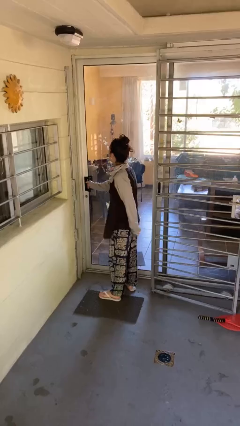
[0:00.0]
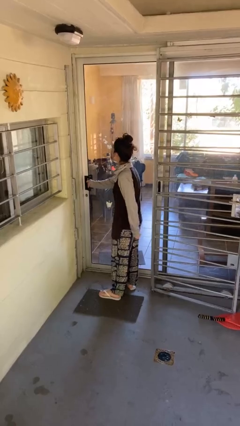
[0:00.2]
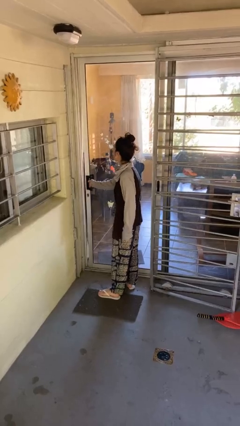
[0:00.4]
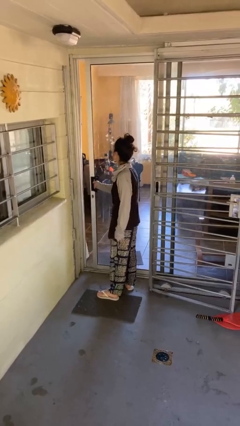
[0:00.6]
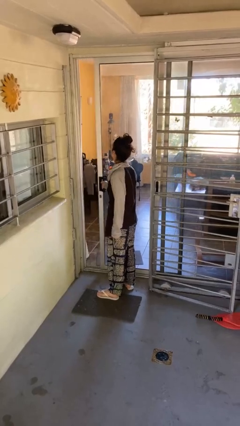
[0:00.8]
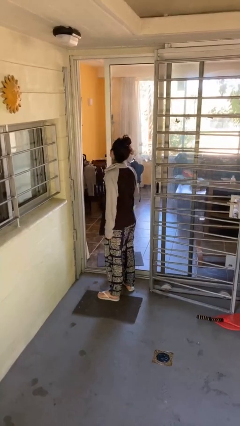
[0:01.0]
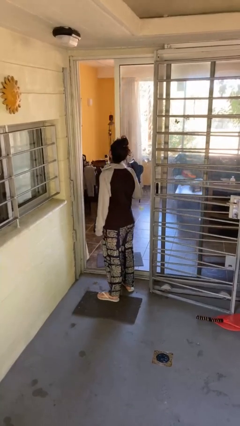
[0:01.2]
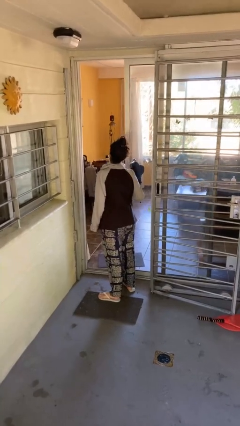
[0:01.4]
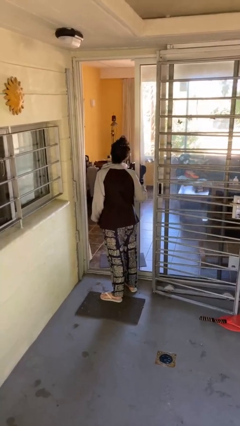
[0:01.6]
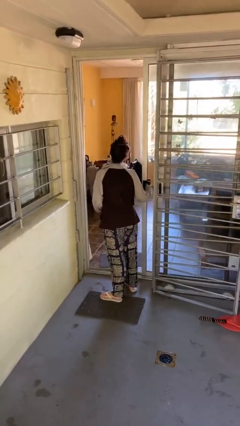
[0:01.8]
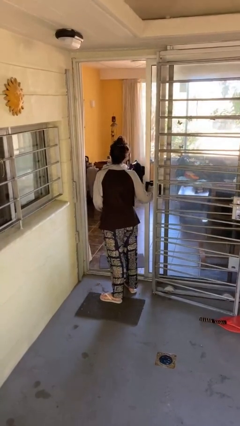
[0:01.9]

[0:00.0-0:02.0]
person opens facility door

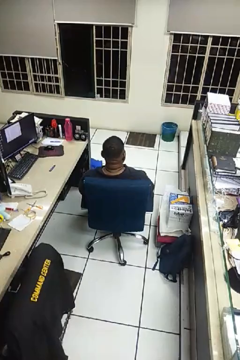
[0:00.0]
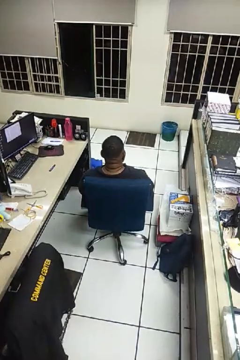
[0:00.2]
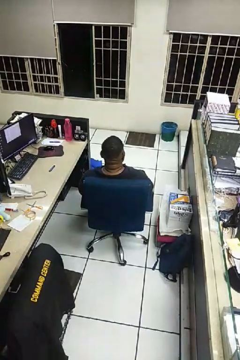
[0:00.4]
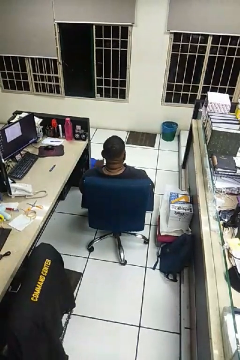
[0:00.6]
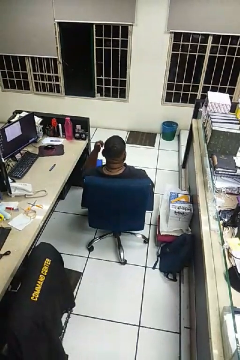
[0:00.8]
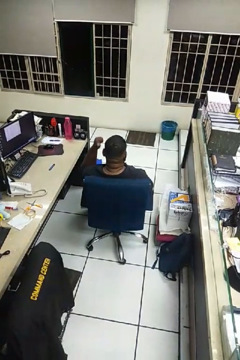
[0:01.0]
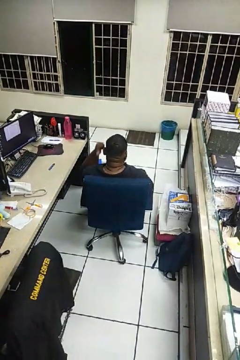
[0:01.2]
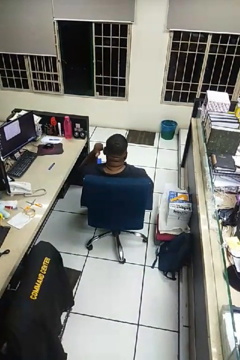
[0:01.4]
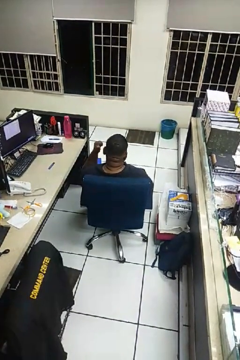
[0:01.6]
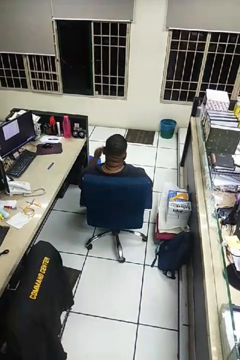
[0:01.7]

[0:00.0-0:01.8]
person gestures behind me

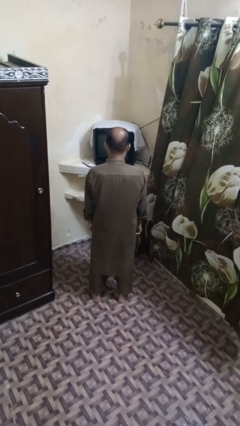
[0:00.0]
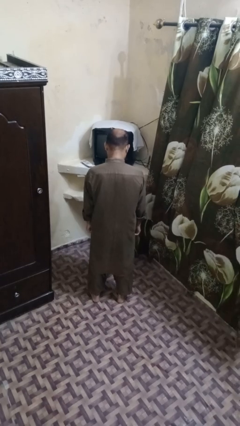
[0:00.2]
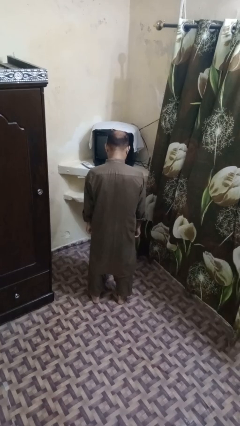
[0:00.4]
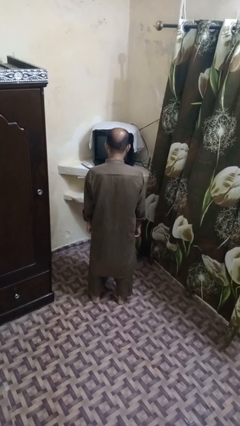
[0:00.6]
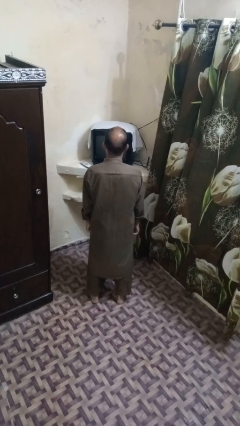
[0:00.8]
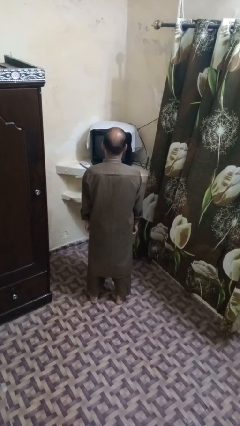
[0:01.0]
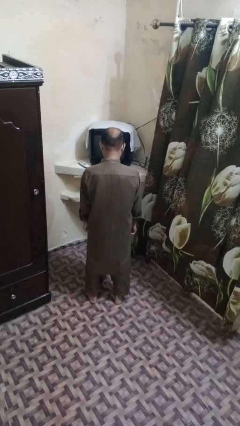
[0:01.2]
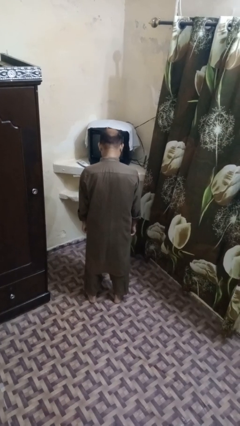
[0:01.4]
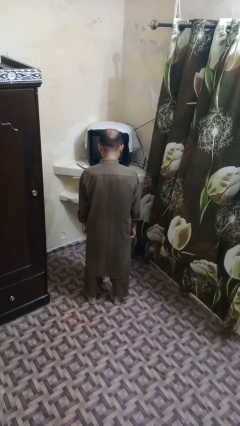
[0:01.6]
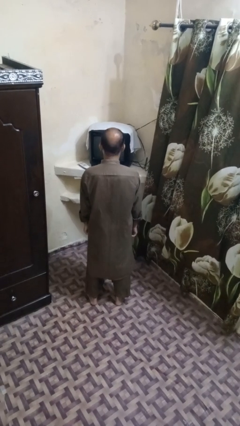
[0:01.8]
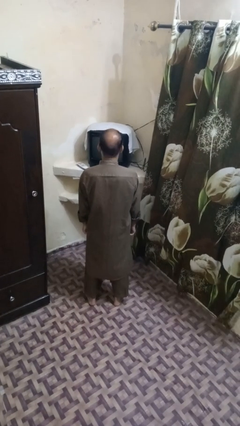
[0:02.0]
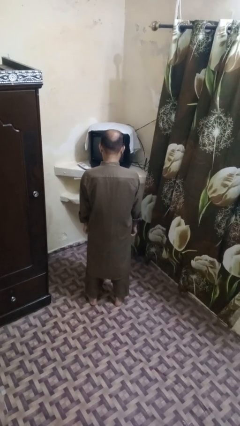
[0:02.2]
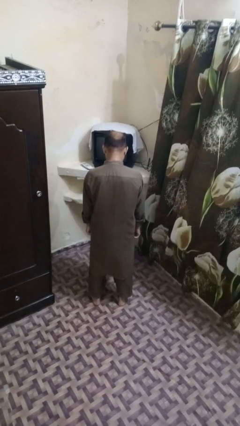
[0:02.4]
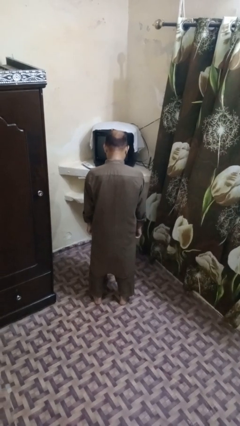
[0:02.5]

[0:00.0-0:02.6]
person nods head

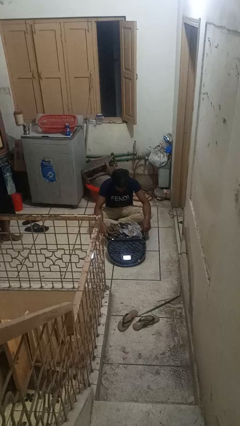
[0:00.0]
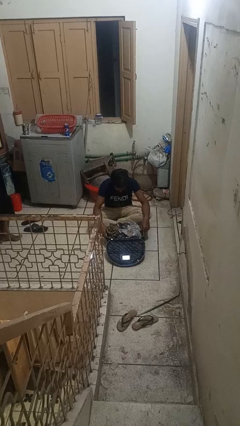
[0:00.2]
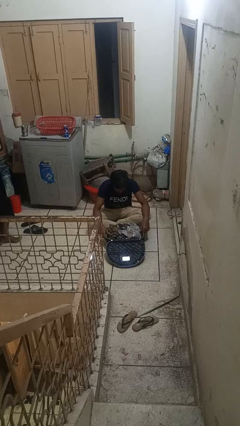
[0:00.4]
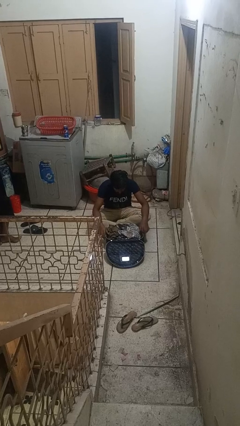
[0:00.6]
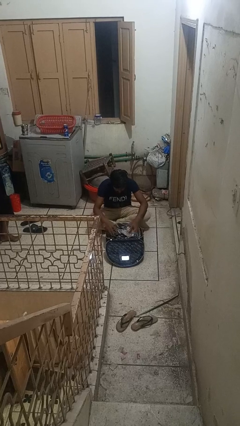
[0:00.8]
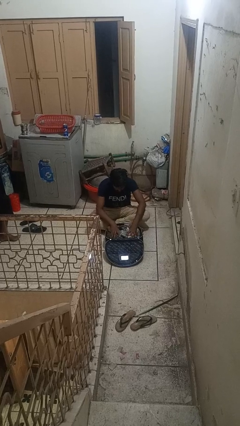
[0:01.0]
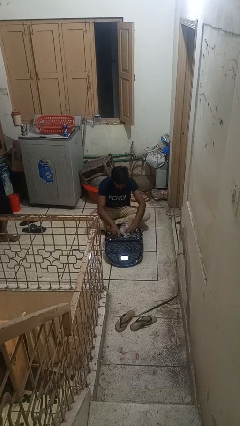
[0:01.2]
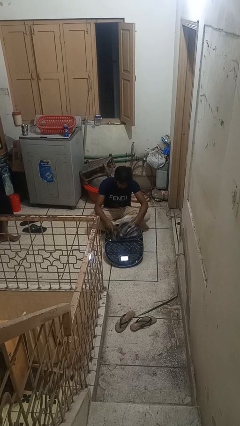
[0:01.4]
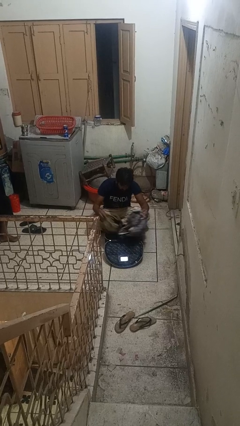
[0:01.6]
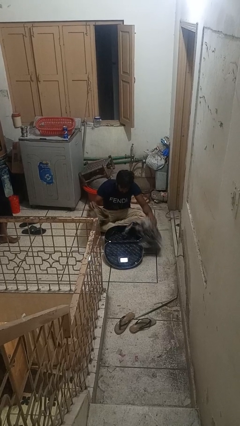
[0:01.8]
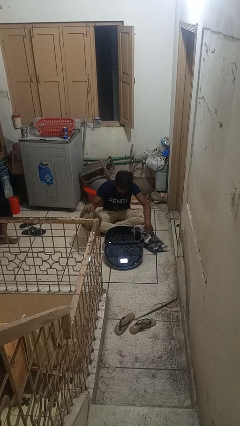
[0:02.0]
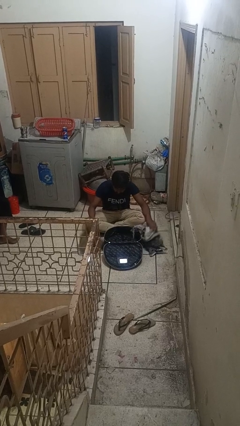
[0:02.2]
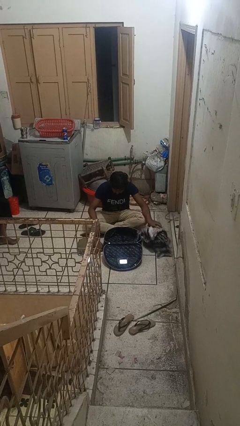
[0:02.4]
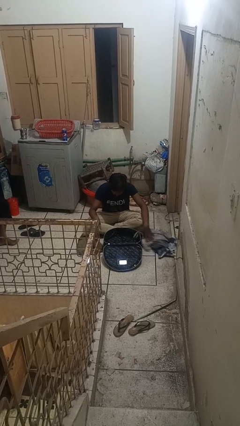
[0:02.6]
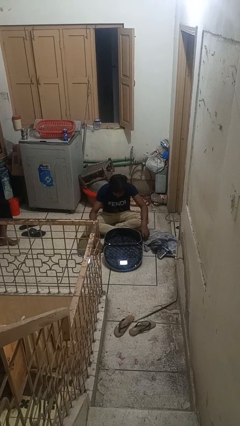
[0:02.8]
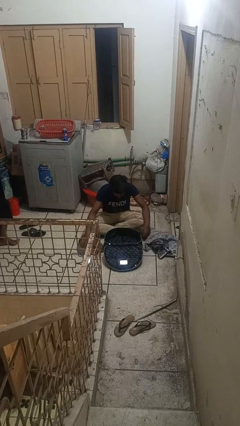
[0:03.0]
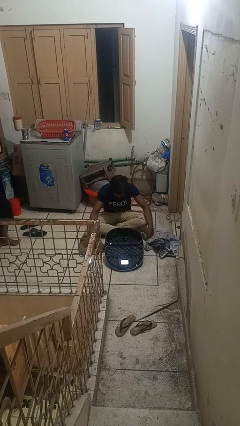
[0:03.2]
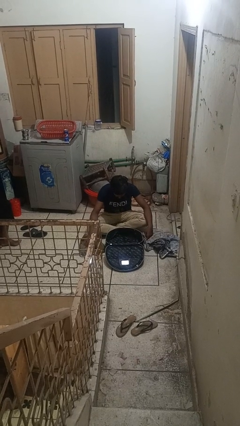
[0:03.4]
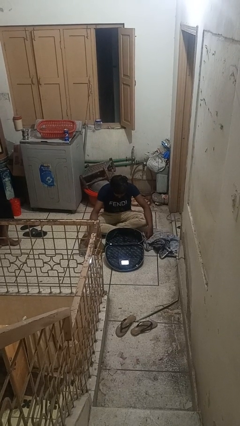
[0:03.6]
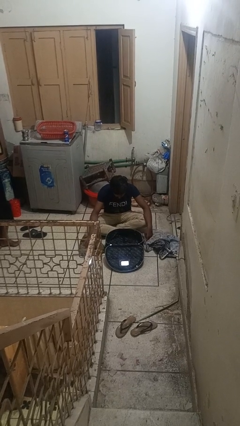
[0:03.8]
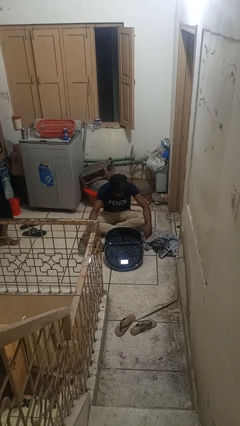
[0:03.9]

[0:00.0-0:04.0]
person unloads clothes from suitcase

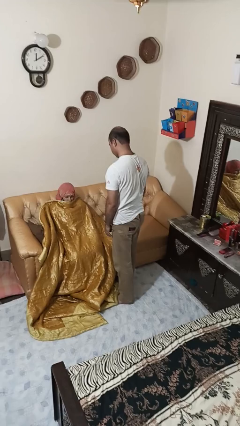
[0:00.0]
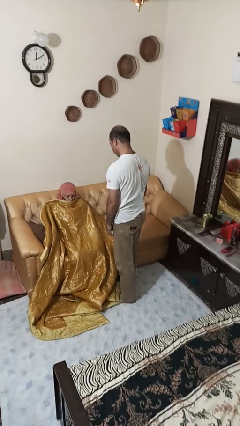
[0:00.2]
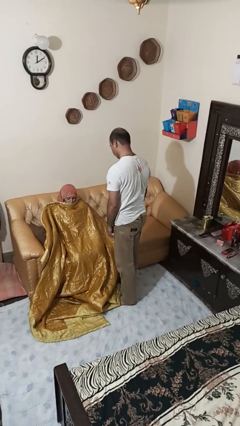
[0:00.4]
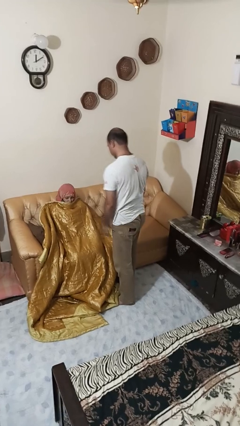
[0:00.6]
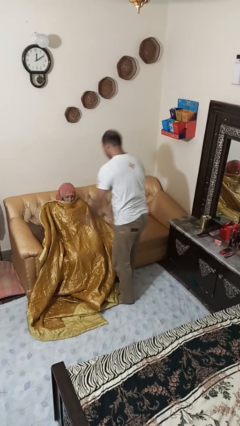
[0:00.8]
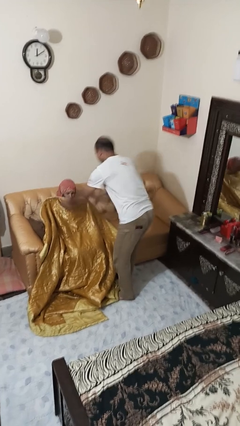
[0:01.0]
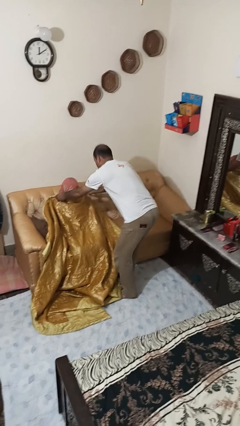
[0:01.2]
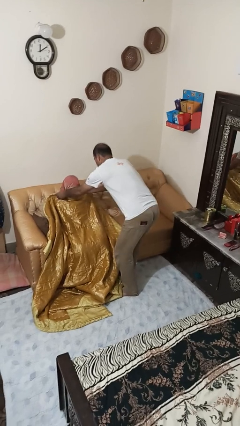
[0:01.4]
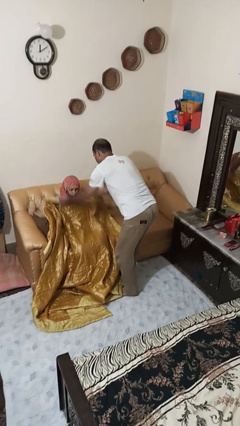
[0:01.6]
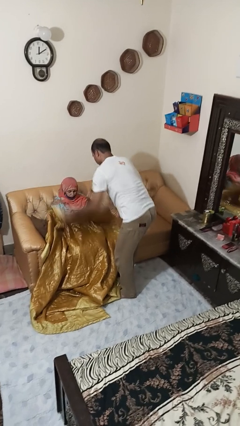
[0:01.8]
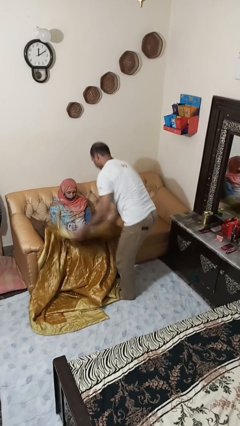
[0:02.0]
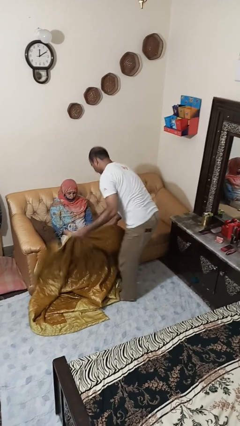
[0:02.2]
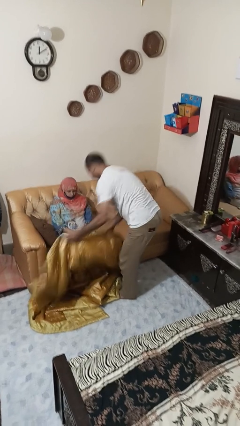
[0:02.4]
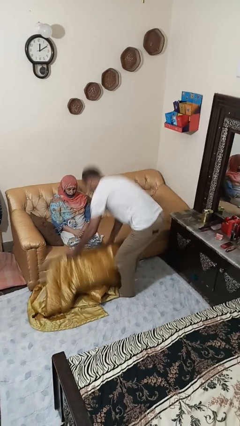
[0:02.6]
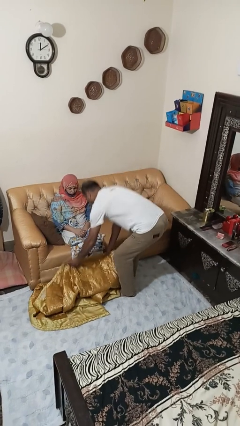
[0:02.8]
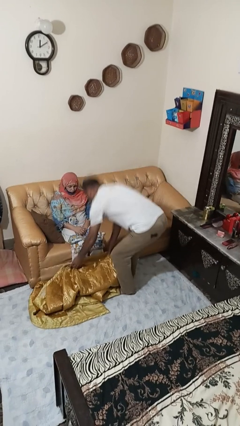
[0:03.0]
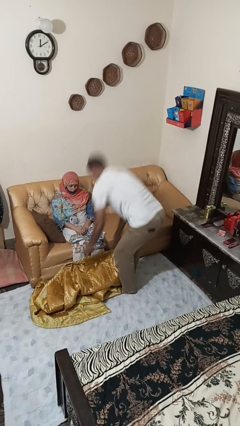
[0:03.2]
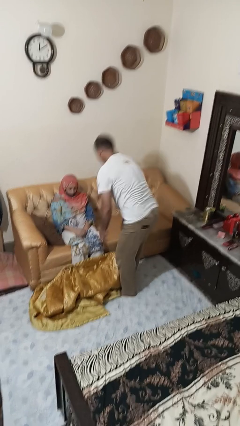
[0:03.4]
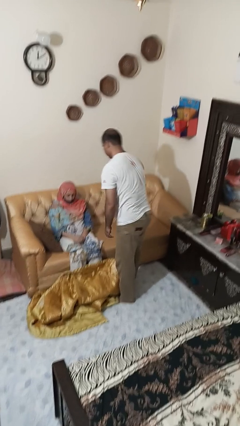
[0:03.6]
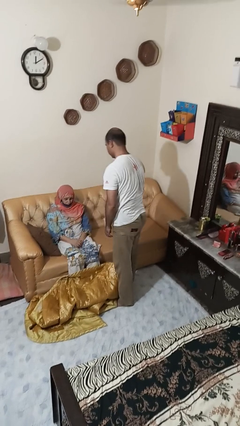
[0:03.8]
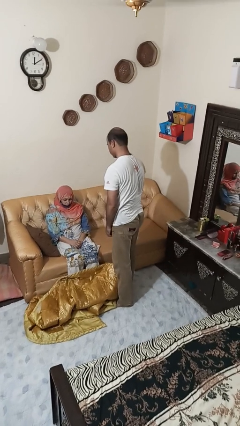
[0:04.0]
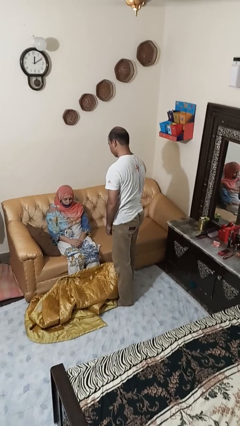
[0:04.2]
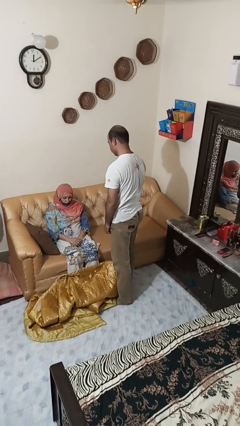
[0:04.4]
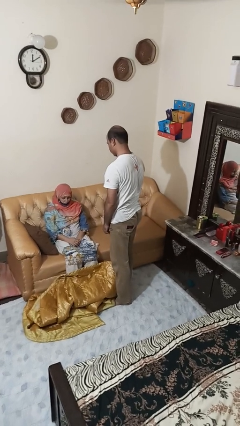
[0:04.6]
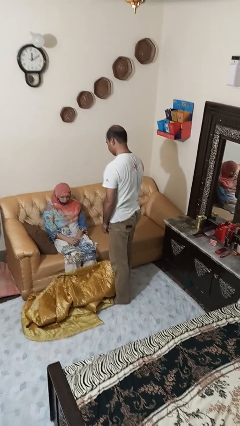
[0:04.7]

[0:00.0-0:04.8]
person uncovers friend with blanket

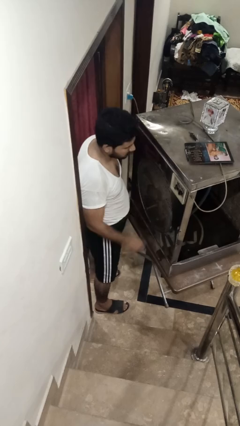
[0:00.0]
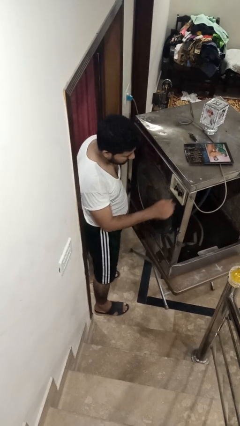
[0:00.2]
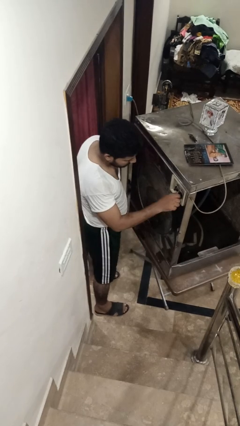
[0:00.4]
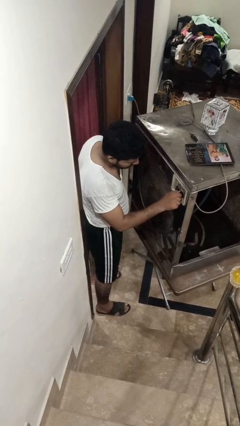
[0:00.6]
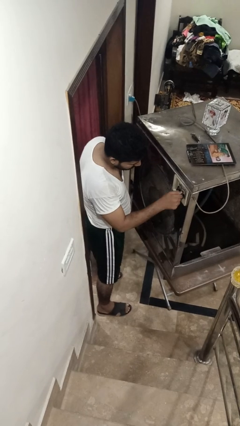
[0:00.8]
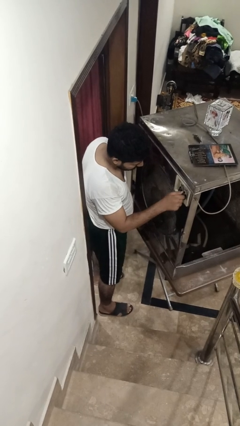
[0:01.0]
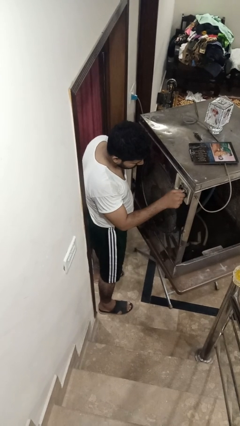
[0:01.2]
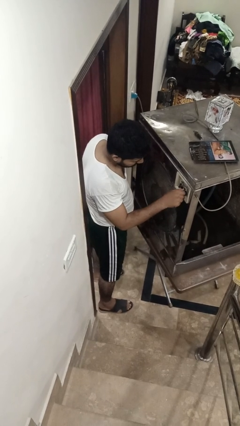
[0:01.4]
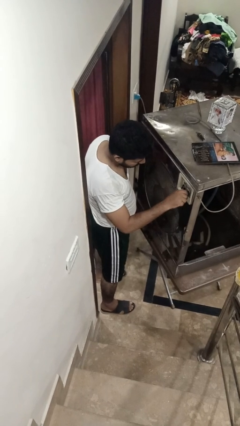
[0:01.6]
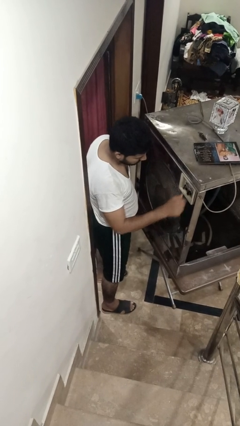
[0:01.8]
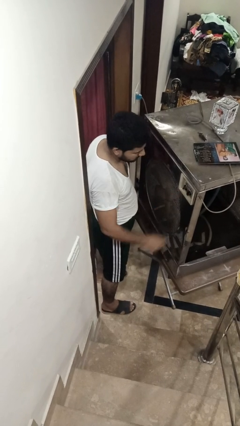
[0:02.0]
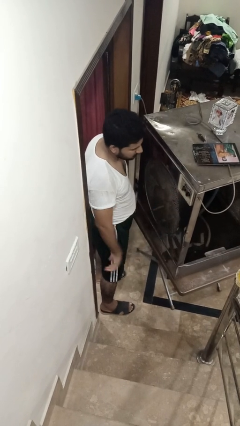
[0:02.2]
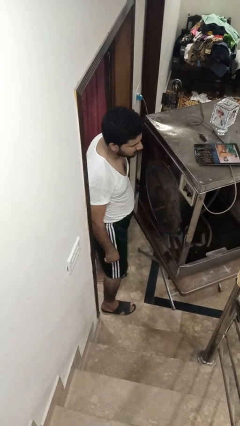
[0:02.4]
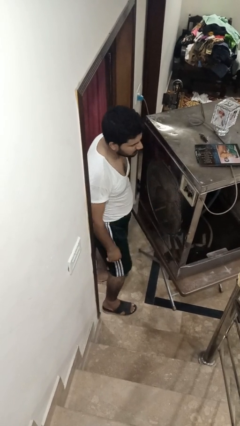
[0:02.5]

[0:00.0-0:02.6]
person adjusts thermostat
